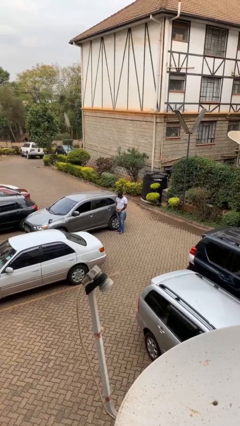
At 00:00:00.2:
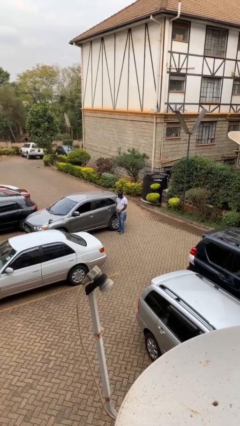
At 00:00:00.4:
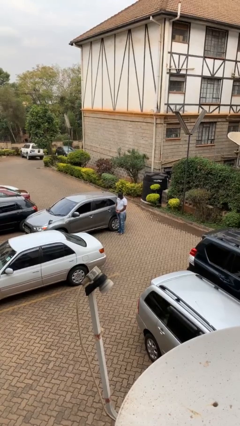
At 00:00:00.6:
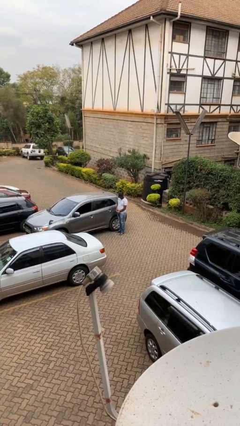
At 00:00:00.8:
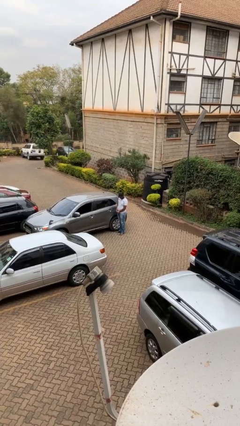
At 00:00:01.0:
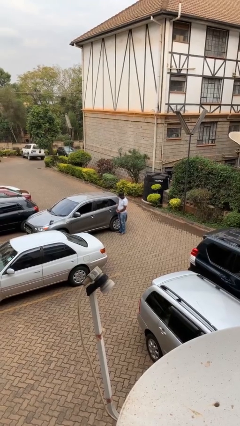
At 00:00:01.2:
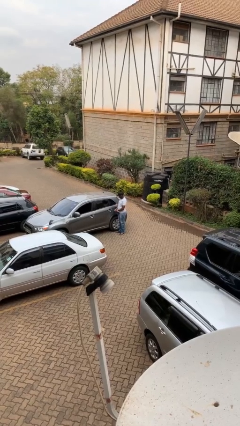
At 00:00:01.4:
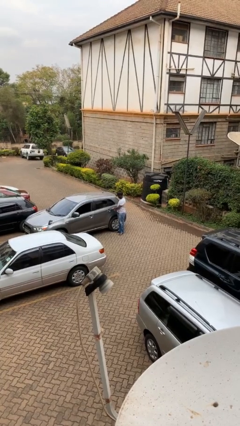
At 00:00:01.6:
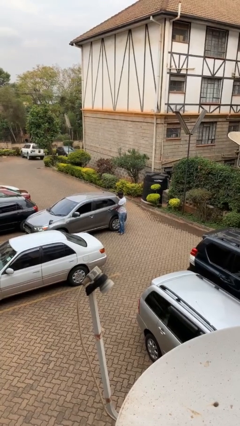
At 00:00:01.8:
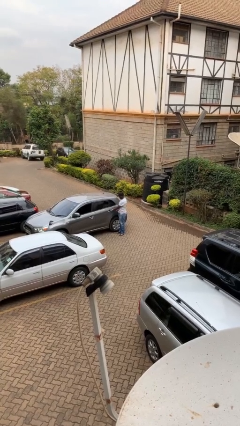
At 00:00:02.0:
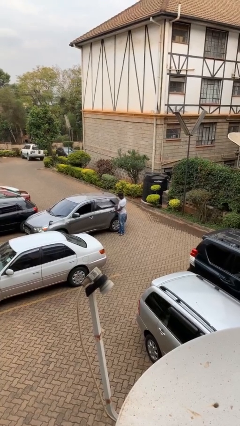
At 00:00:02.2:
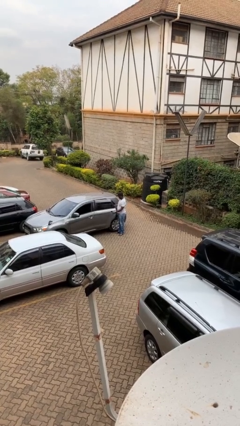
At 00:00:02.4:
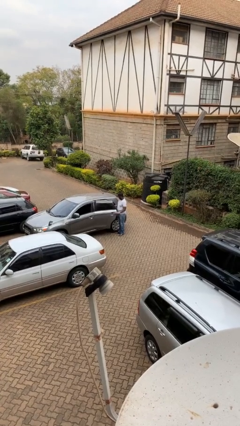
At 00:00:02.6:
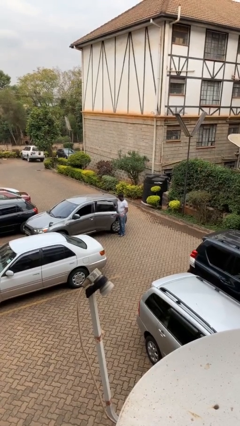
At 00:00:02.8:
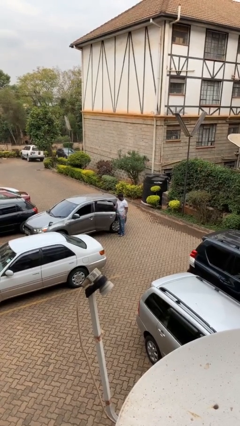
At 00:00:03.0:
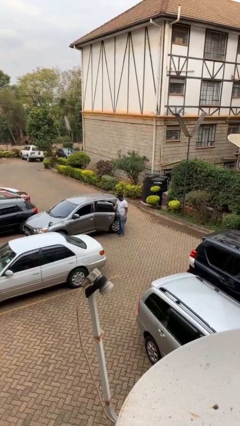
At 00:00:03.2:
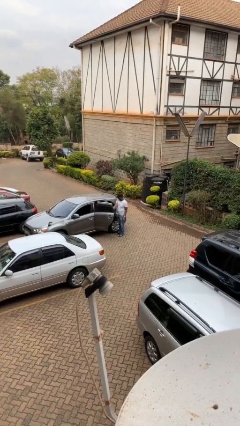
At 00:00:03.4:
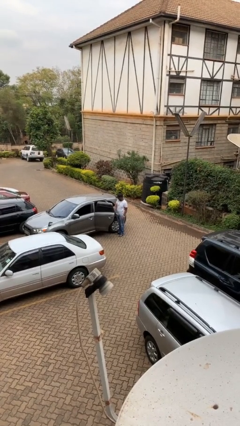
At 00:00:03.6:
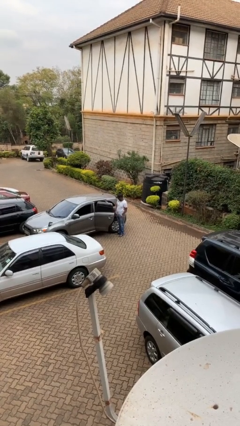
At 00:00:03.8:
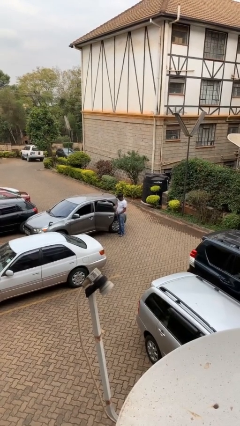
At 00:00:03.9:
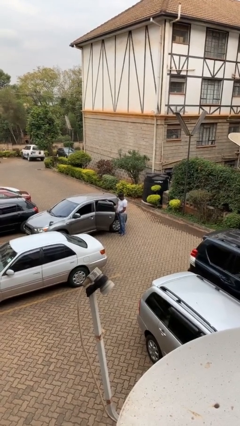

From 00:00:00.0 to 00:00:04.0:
person opens car door

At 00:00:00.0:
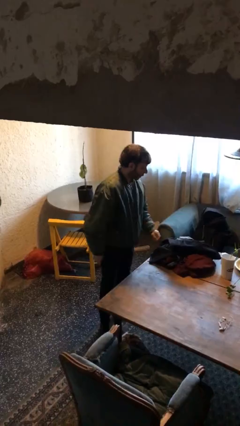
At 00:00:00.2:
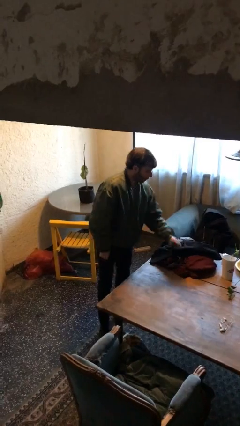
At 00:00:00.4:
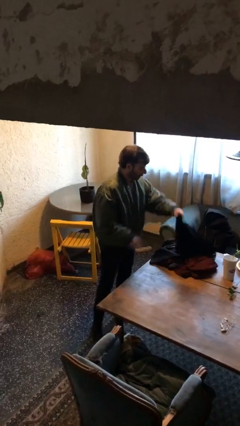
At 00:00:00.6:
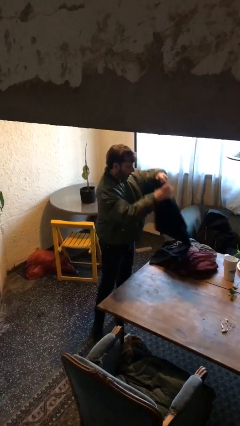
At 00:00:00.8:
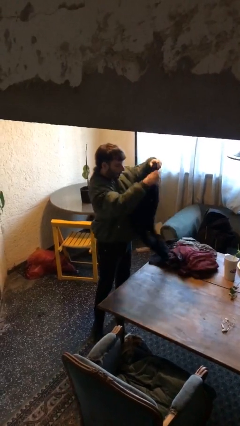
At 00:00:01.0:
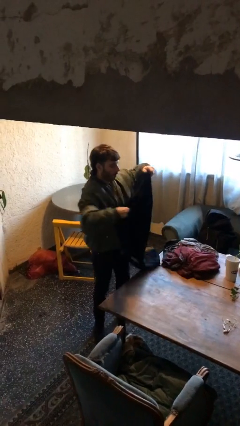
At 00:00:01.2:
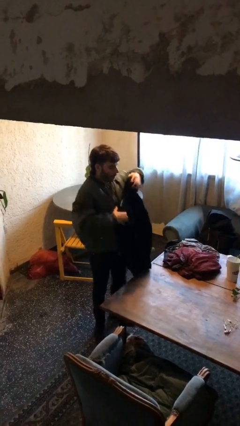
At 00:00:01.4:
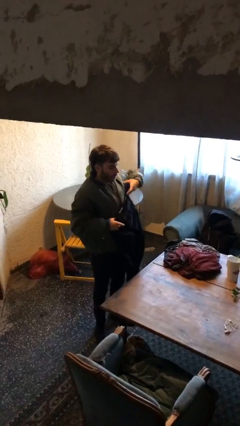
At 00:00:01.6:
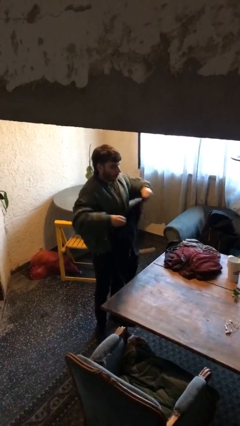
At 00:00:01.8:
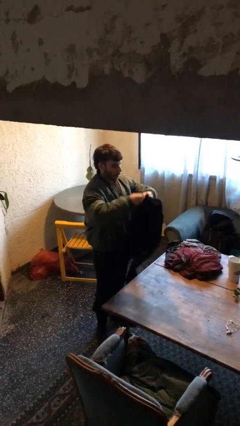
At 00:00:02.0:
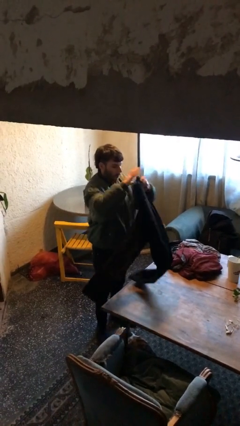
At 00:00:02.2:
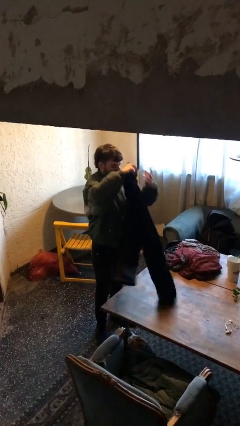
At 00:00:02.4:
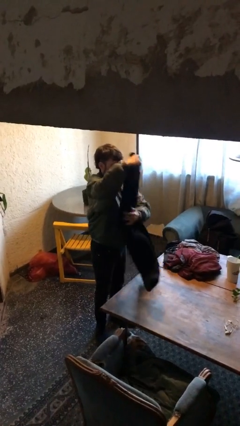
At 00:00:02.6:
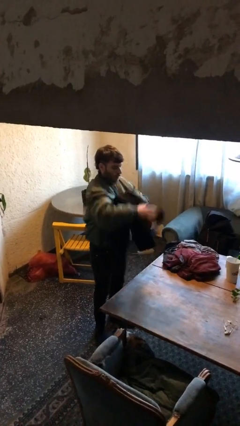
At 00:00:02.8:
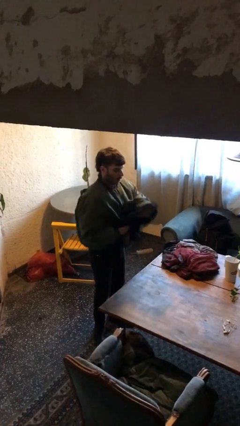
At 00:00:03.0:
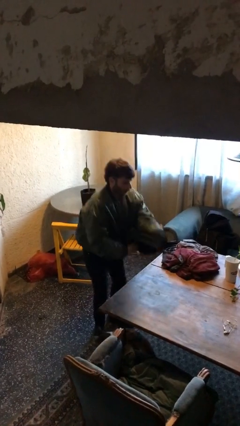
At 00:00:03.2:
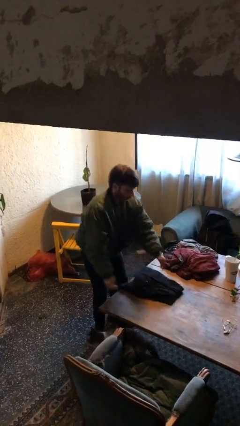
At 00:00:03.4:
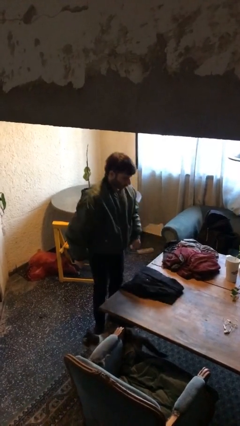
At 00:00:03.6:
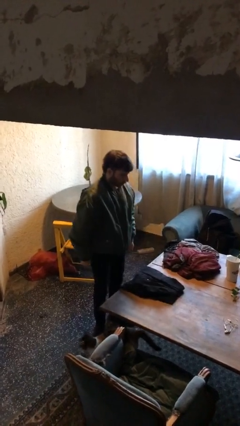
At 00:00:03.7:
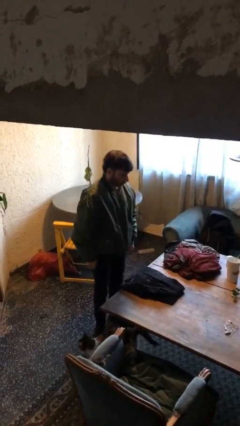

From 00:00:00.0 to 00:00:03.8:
person folds pants

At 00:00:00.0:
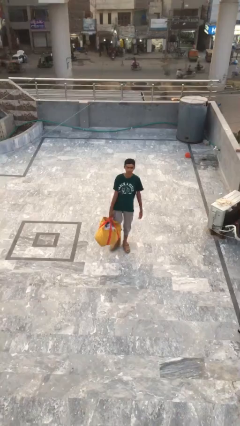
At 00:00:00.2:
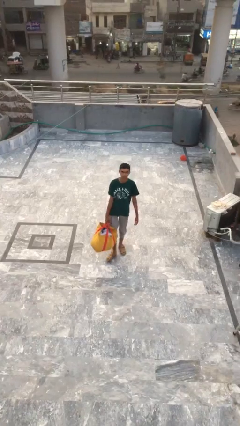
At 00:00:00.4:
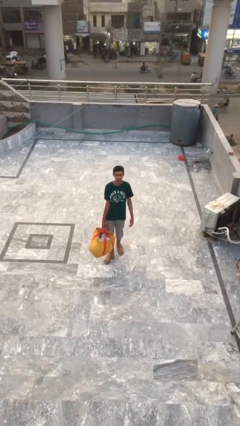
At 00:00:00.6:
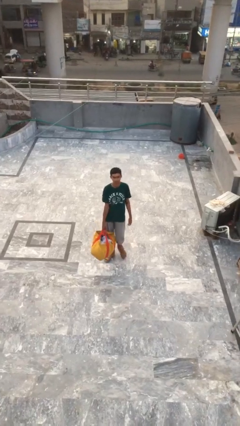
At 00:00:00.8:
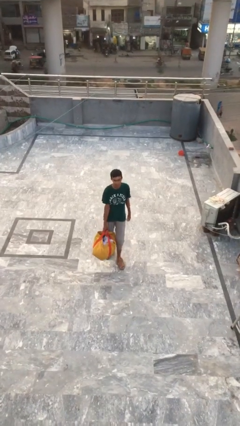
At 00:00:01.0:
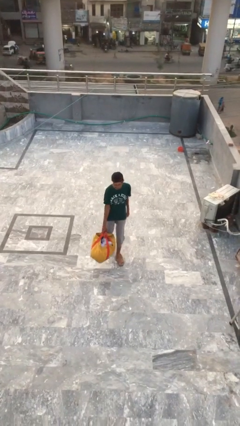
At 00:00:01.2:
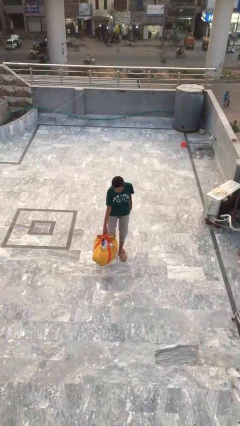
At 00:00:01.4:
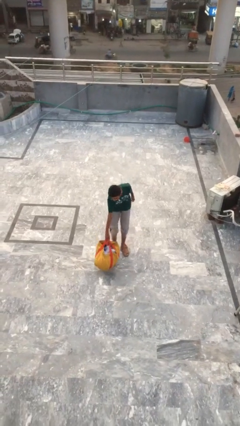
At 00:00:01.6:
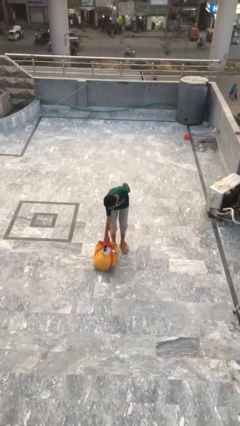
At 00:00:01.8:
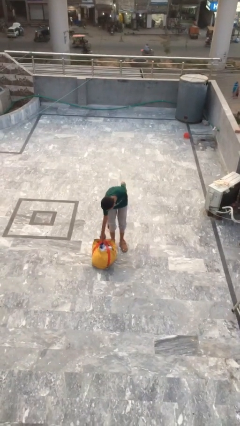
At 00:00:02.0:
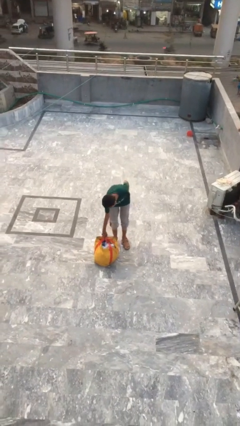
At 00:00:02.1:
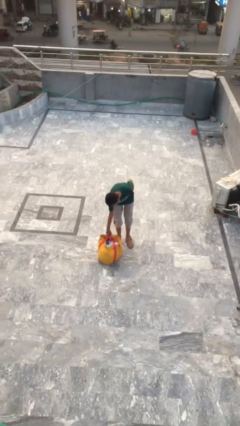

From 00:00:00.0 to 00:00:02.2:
person puts down object on floor

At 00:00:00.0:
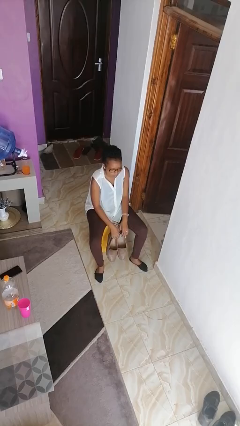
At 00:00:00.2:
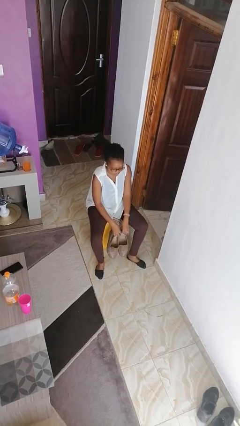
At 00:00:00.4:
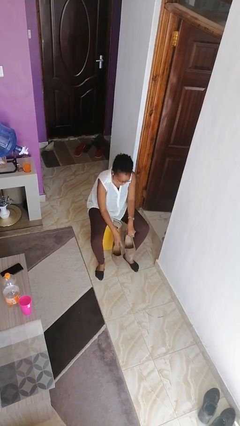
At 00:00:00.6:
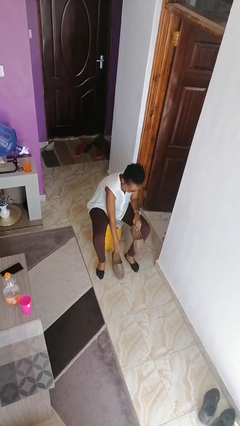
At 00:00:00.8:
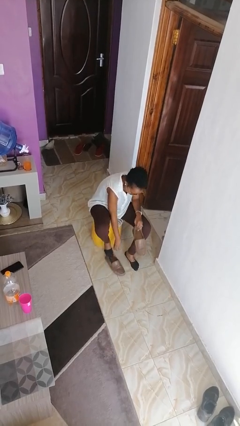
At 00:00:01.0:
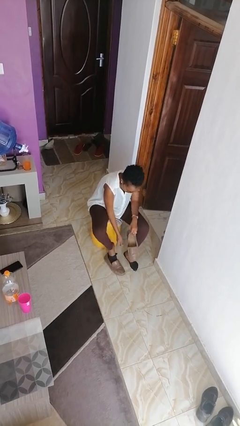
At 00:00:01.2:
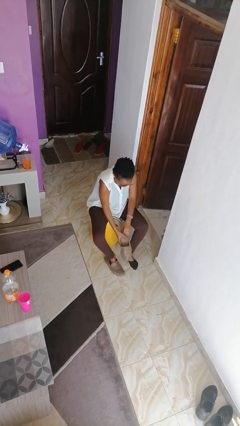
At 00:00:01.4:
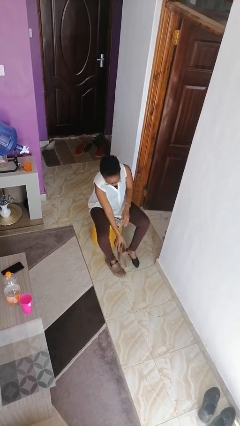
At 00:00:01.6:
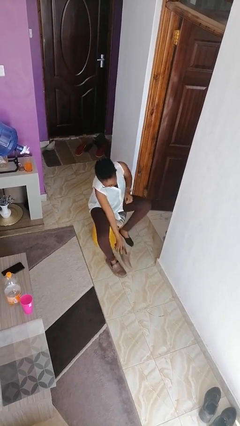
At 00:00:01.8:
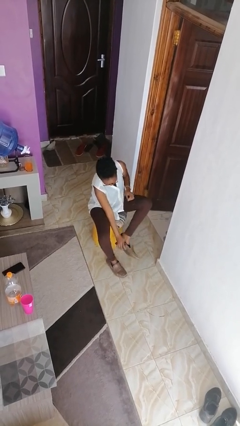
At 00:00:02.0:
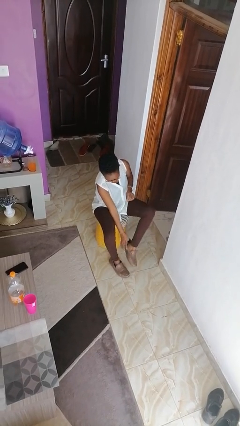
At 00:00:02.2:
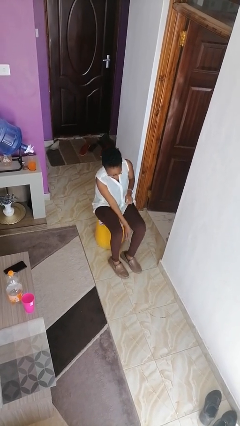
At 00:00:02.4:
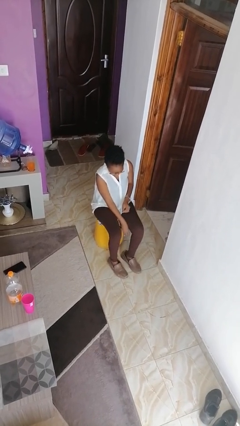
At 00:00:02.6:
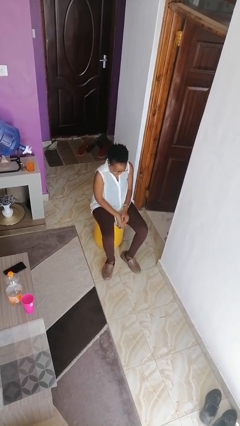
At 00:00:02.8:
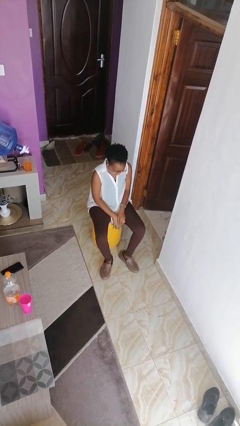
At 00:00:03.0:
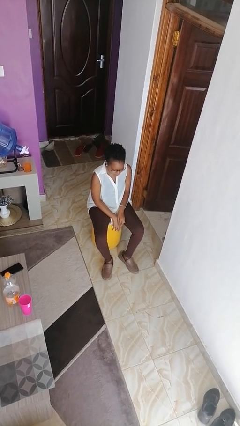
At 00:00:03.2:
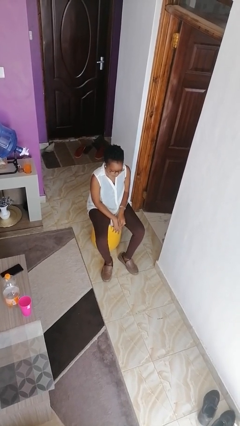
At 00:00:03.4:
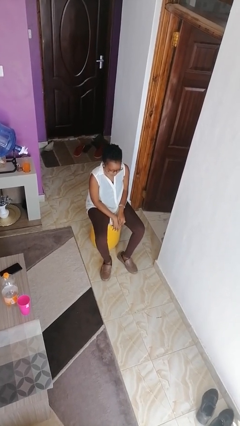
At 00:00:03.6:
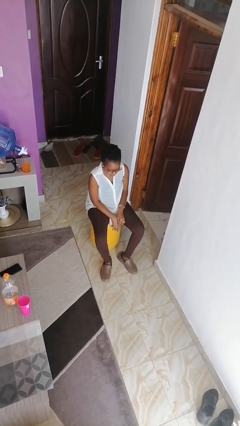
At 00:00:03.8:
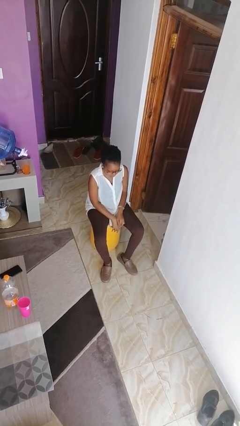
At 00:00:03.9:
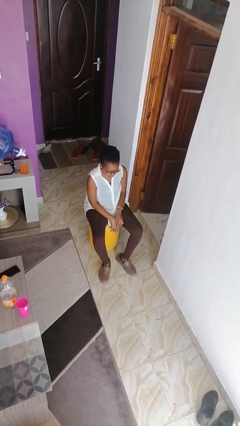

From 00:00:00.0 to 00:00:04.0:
person puts on shoes

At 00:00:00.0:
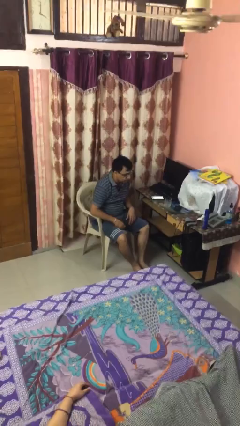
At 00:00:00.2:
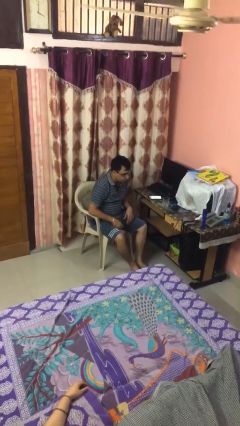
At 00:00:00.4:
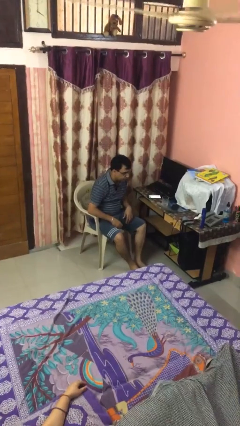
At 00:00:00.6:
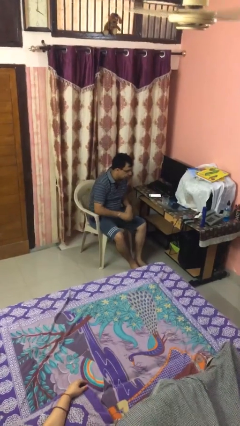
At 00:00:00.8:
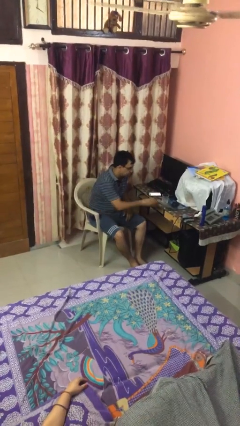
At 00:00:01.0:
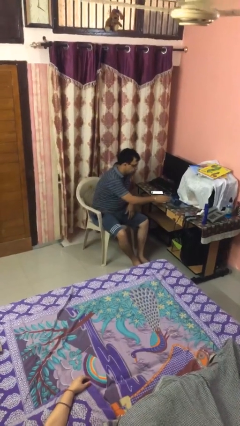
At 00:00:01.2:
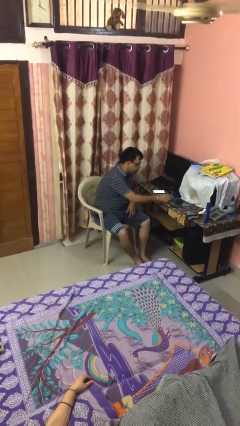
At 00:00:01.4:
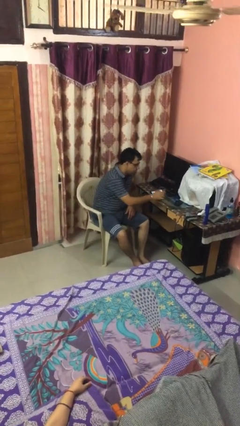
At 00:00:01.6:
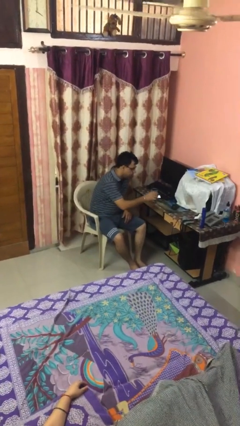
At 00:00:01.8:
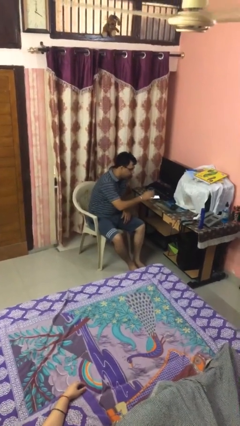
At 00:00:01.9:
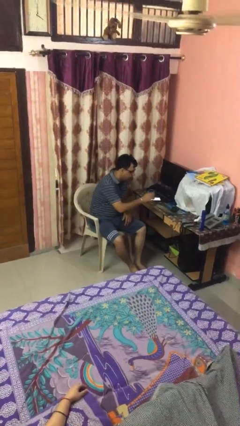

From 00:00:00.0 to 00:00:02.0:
person picks up object from table

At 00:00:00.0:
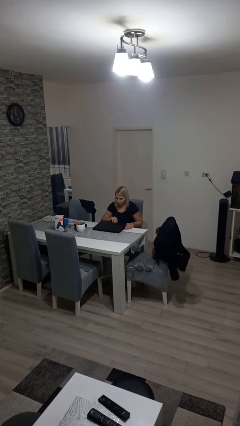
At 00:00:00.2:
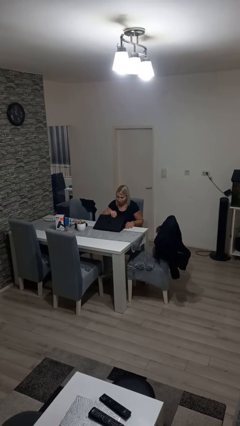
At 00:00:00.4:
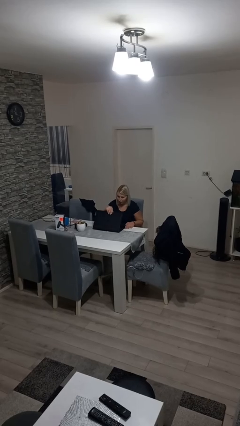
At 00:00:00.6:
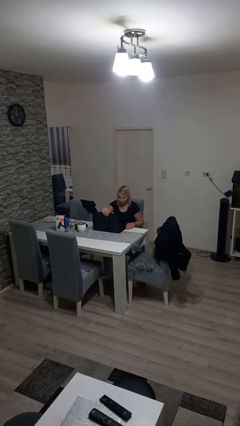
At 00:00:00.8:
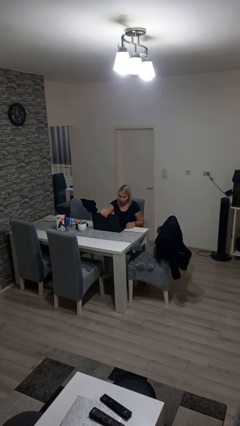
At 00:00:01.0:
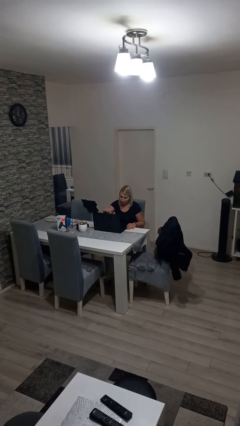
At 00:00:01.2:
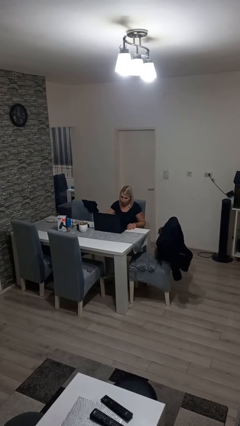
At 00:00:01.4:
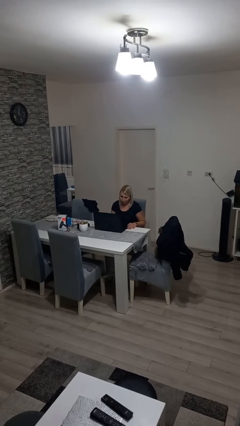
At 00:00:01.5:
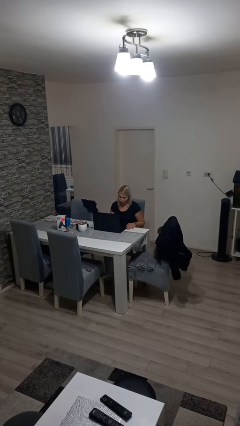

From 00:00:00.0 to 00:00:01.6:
person opens laptop
